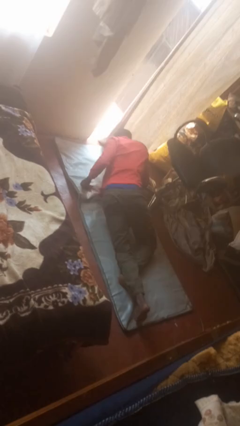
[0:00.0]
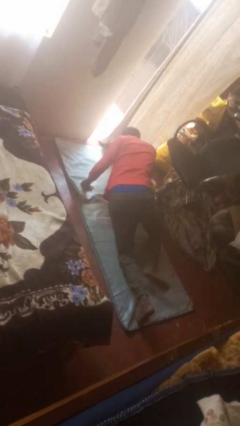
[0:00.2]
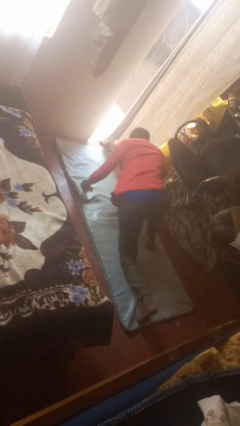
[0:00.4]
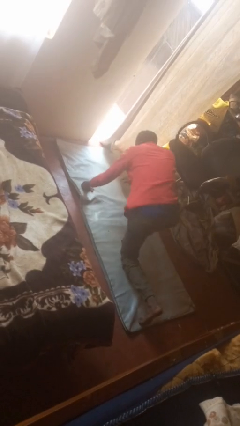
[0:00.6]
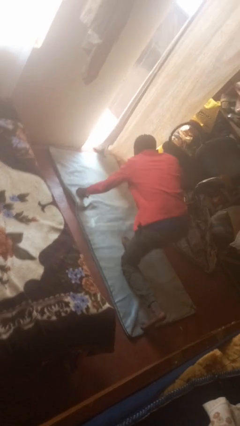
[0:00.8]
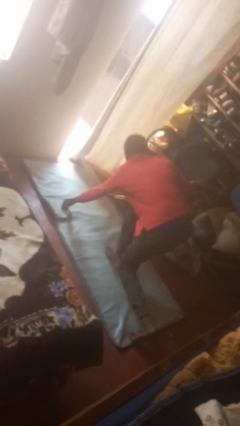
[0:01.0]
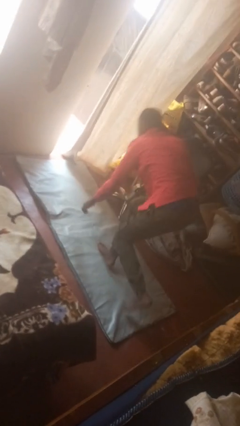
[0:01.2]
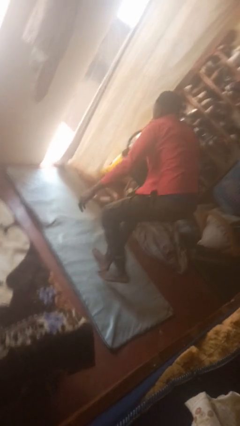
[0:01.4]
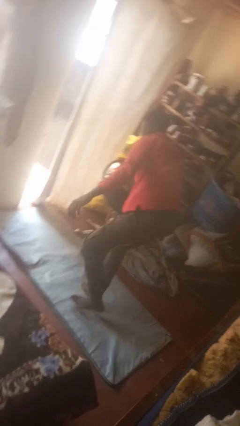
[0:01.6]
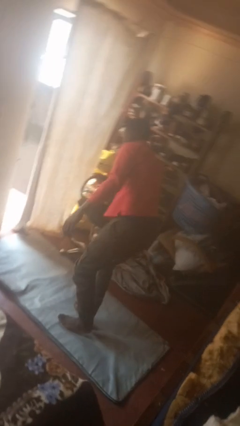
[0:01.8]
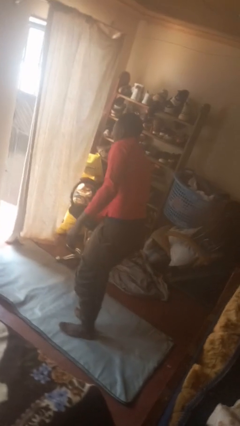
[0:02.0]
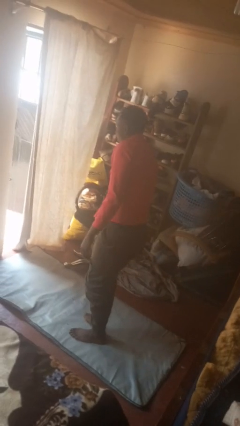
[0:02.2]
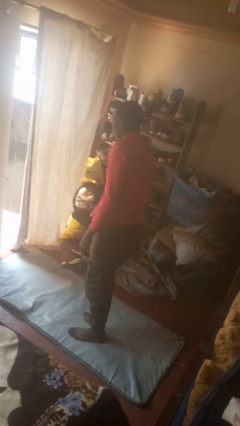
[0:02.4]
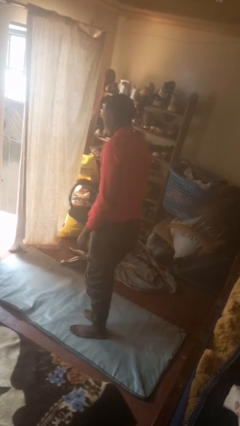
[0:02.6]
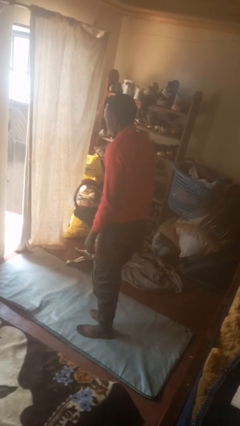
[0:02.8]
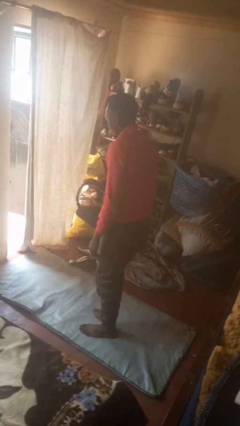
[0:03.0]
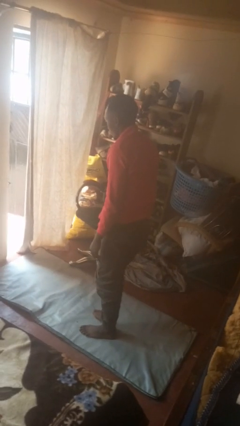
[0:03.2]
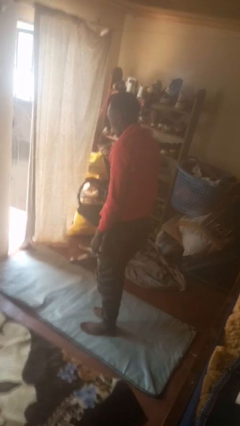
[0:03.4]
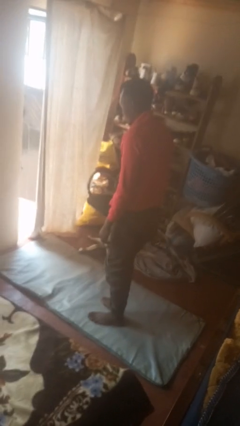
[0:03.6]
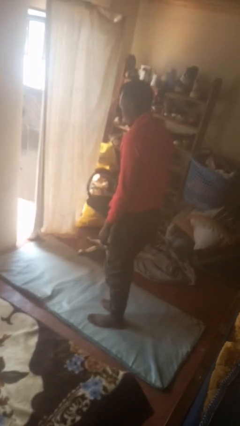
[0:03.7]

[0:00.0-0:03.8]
person stands up from floor

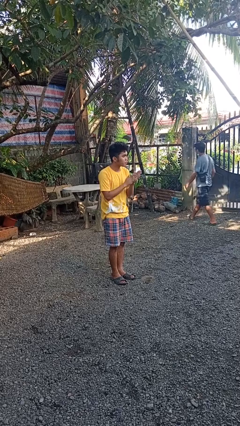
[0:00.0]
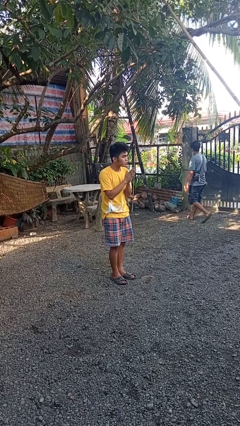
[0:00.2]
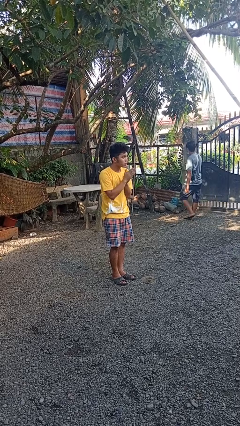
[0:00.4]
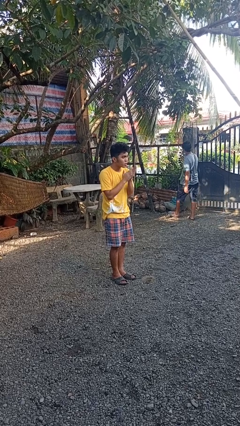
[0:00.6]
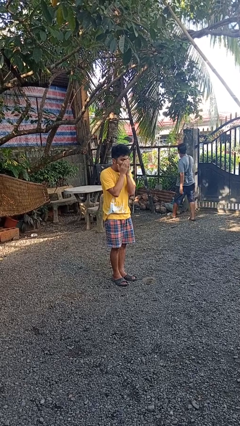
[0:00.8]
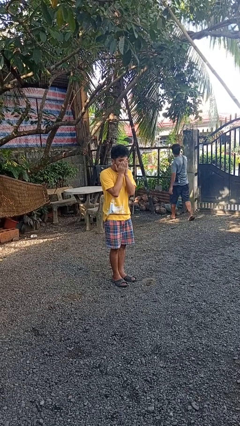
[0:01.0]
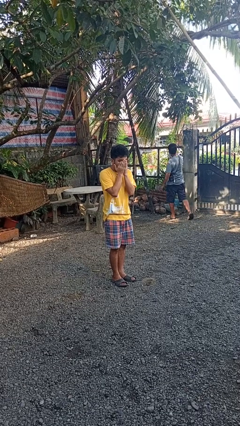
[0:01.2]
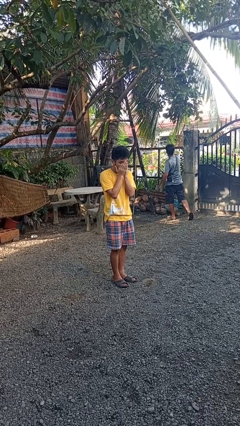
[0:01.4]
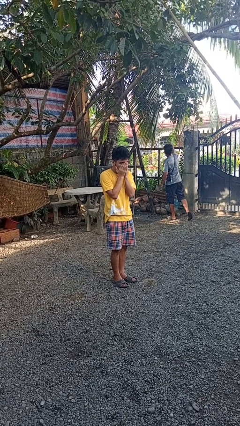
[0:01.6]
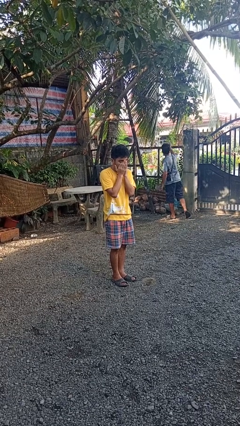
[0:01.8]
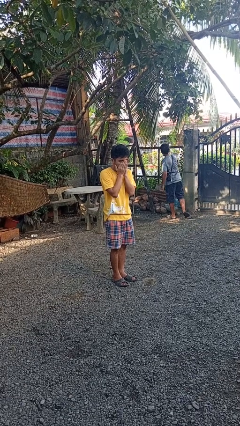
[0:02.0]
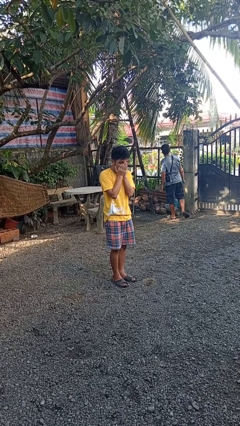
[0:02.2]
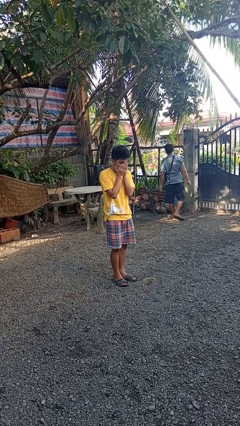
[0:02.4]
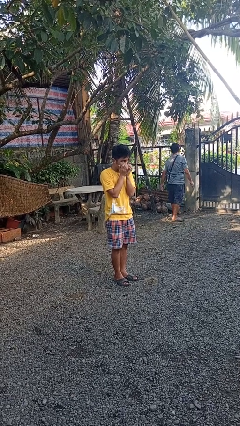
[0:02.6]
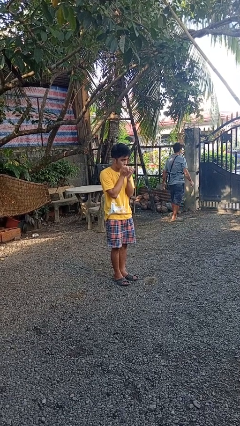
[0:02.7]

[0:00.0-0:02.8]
person blows into hands

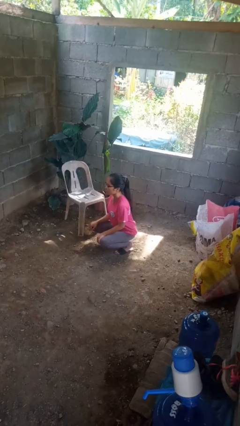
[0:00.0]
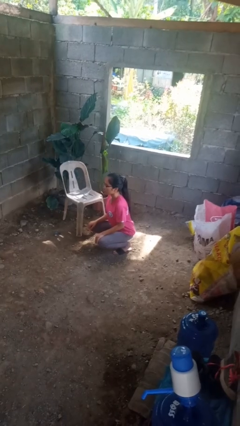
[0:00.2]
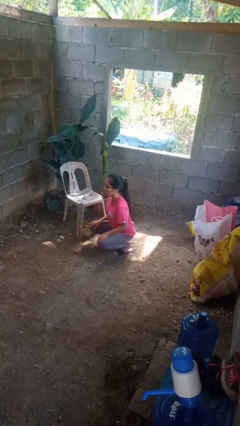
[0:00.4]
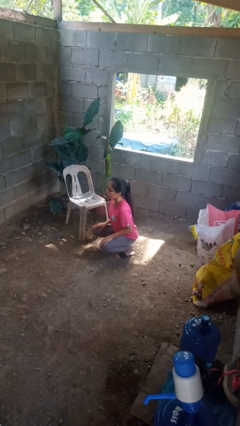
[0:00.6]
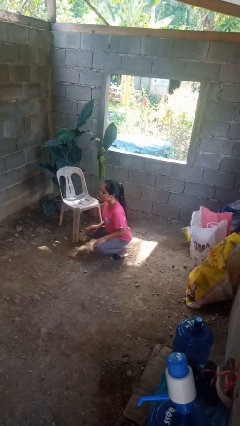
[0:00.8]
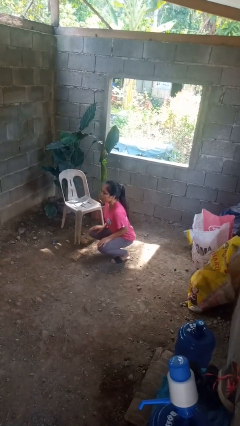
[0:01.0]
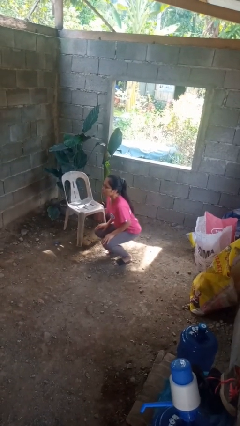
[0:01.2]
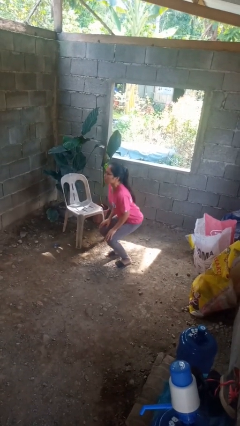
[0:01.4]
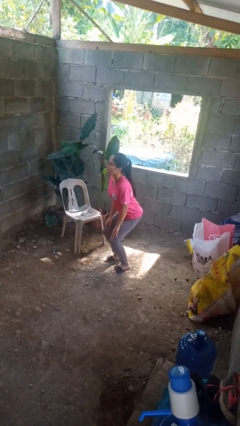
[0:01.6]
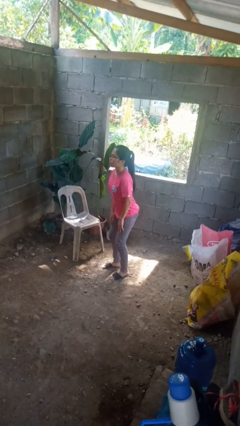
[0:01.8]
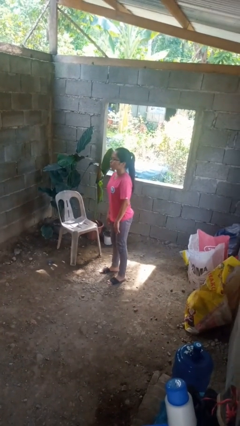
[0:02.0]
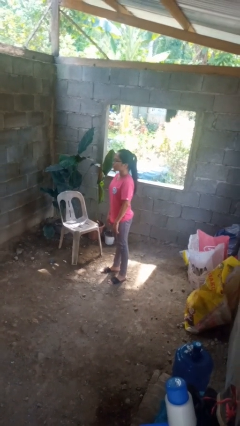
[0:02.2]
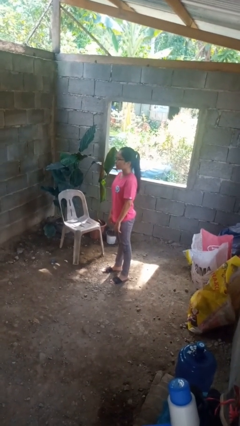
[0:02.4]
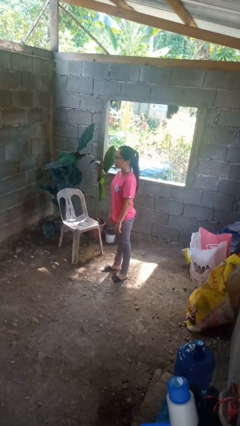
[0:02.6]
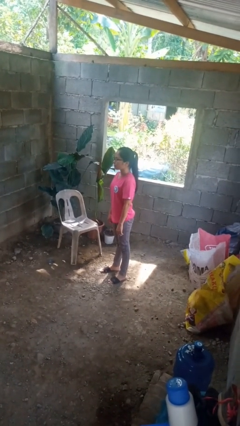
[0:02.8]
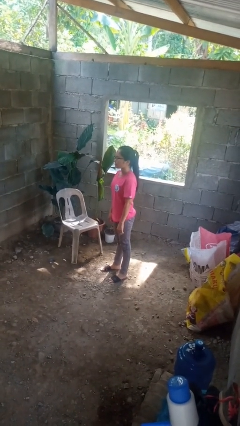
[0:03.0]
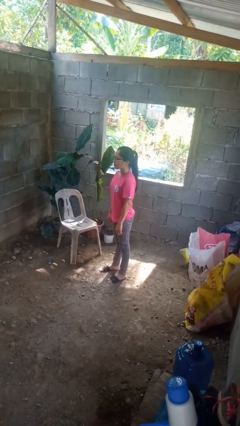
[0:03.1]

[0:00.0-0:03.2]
person stands up

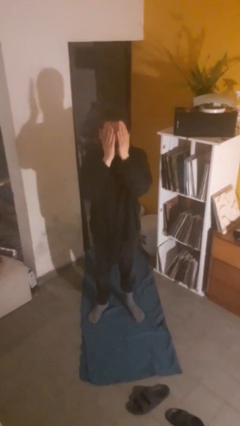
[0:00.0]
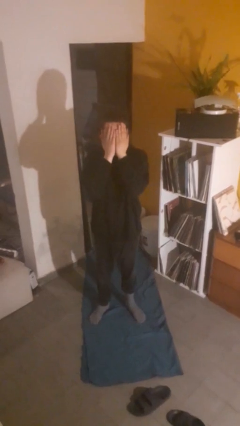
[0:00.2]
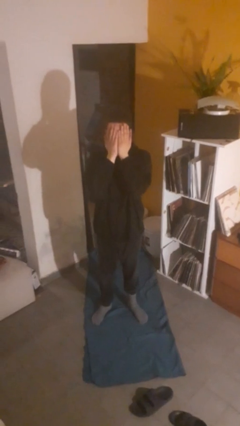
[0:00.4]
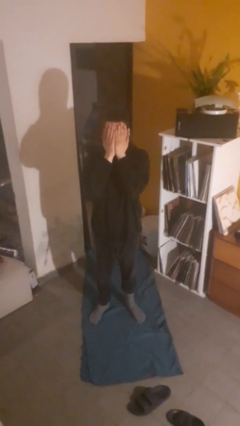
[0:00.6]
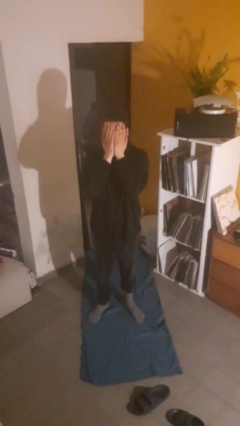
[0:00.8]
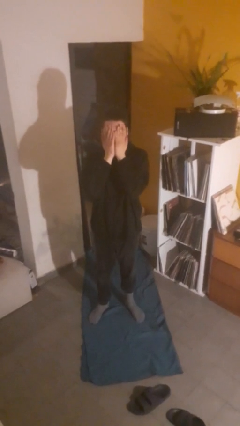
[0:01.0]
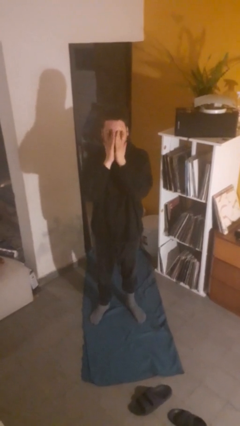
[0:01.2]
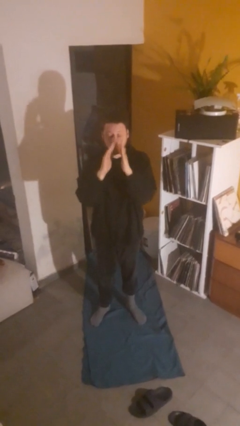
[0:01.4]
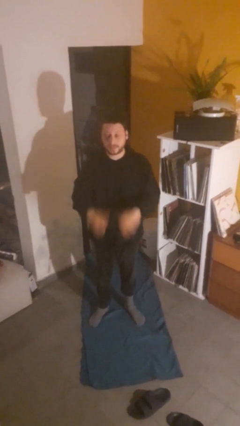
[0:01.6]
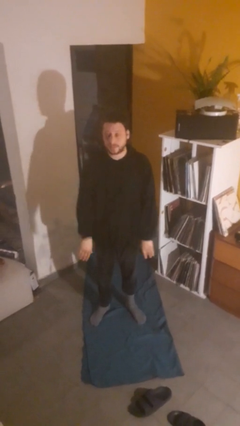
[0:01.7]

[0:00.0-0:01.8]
person covers face with hands

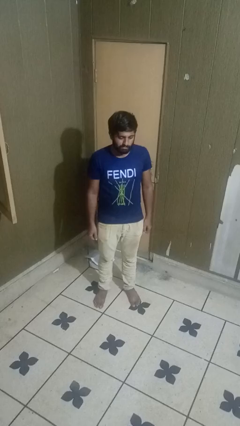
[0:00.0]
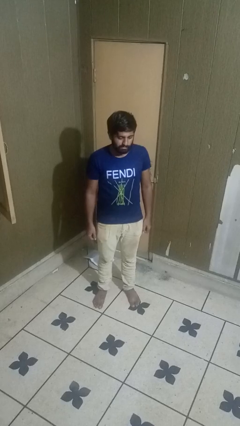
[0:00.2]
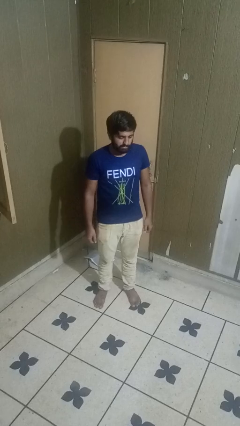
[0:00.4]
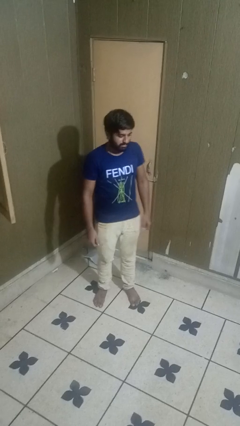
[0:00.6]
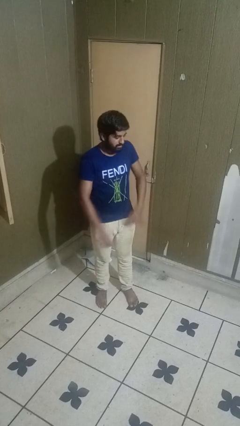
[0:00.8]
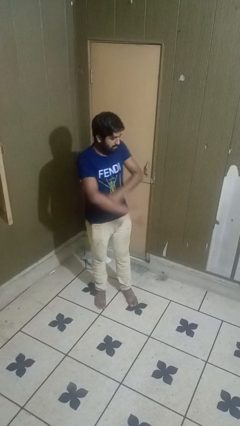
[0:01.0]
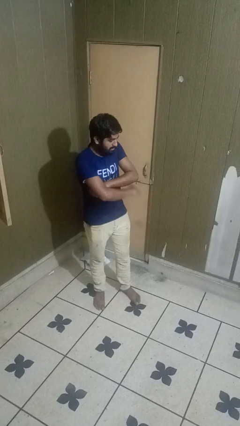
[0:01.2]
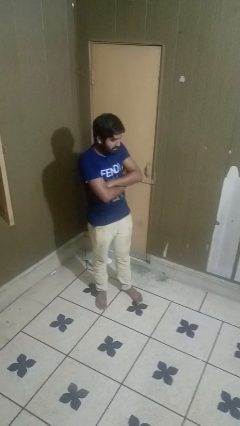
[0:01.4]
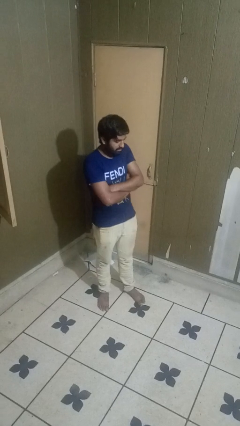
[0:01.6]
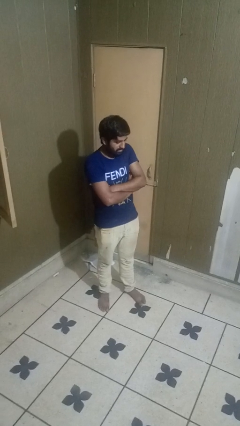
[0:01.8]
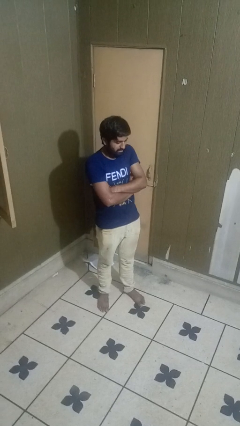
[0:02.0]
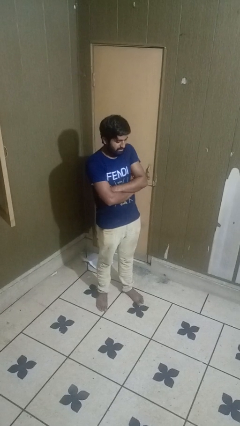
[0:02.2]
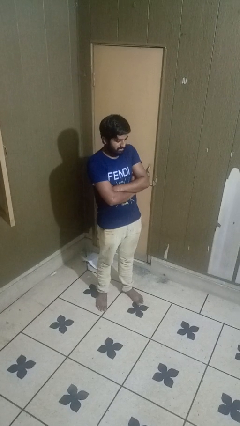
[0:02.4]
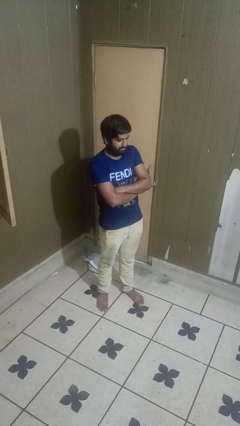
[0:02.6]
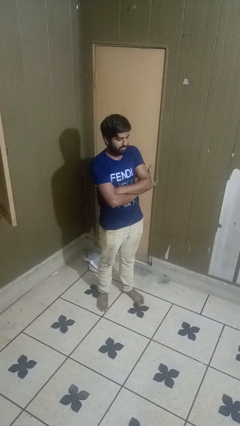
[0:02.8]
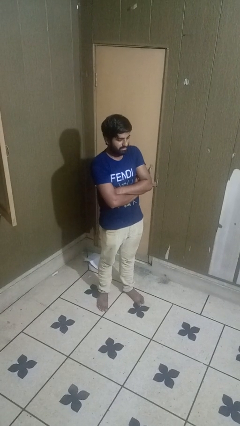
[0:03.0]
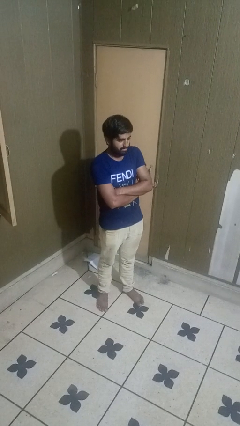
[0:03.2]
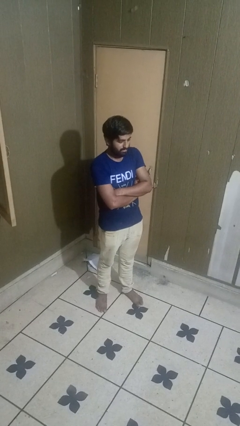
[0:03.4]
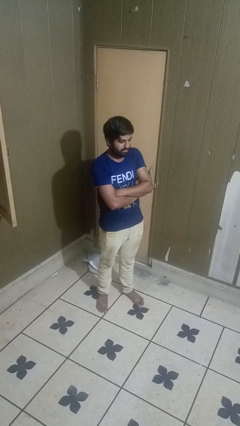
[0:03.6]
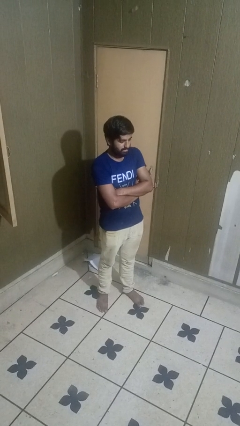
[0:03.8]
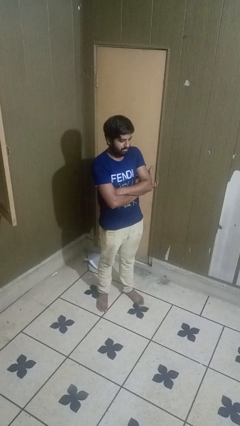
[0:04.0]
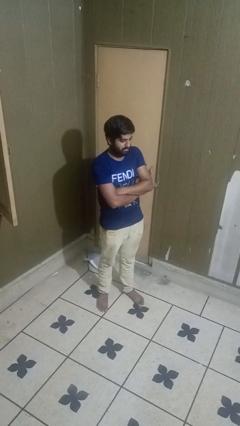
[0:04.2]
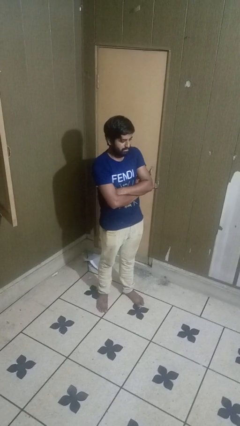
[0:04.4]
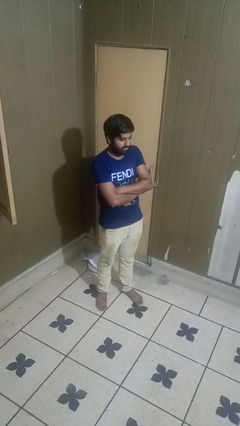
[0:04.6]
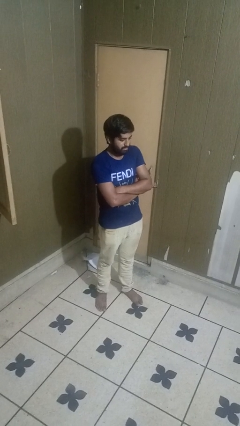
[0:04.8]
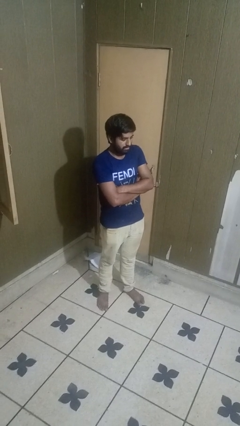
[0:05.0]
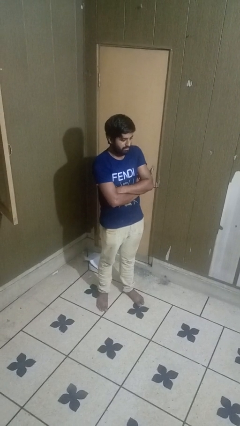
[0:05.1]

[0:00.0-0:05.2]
person crosses arms

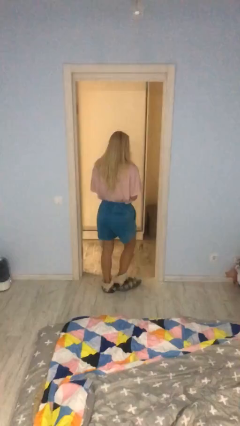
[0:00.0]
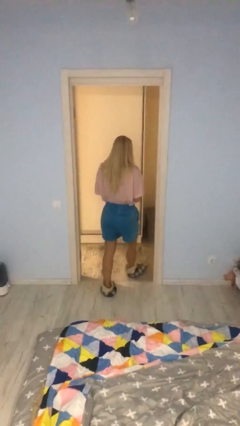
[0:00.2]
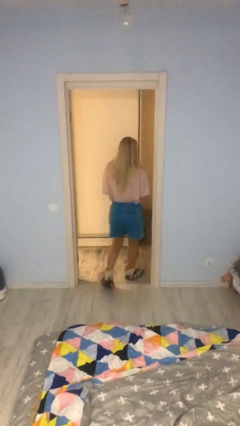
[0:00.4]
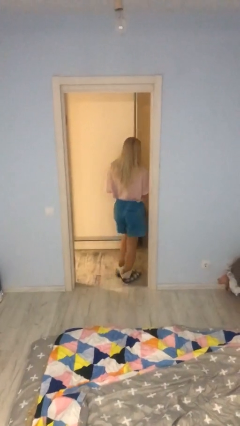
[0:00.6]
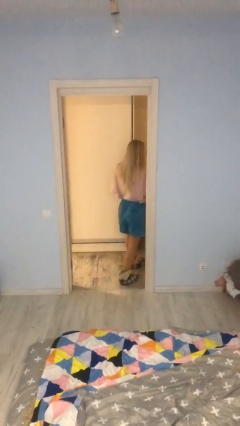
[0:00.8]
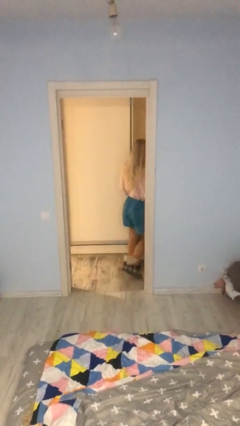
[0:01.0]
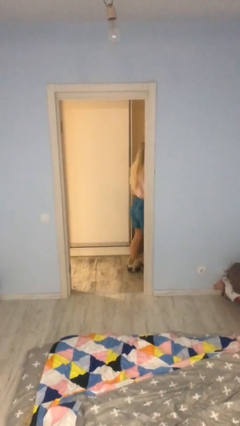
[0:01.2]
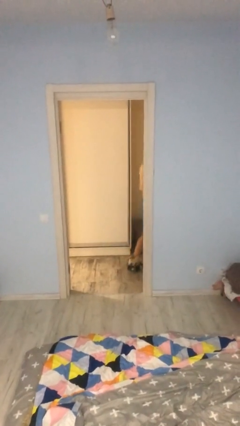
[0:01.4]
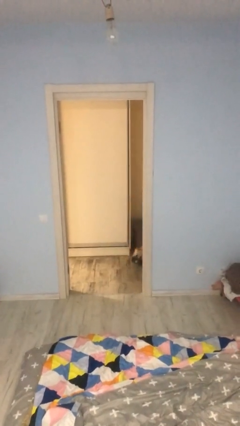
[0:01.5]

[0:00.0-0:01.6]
person exits scene through structure
